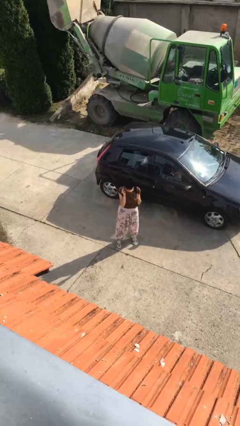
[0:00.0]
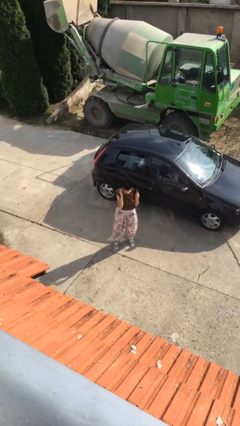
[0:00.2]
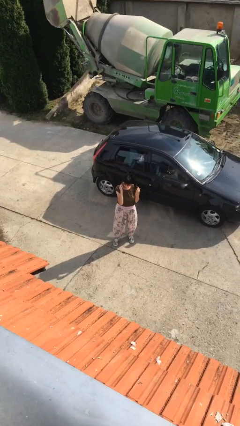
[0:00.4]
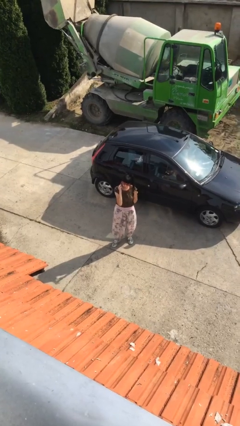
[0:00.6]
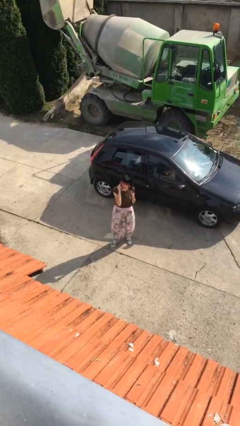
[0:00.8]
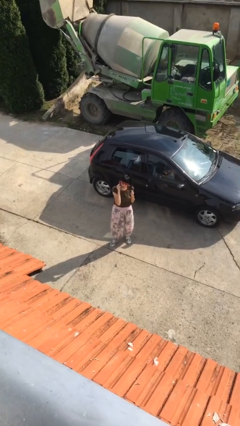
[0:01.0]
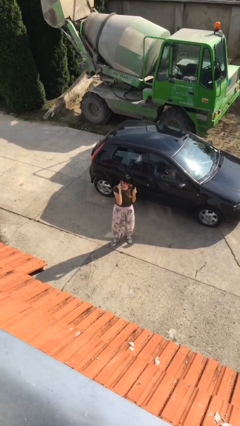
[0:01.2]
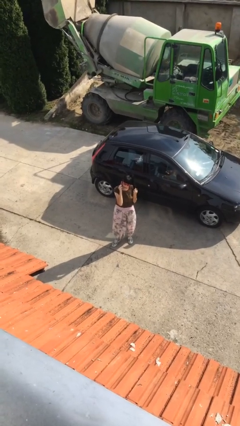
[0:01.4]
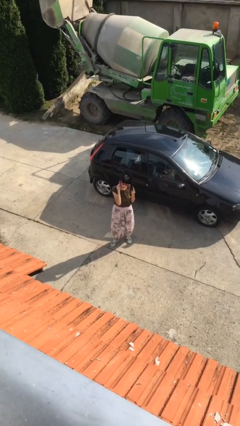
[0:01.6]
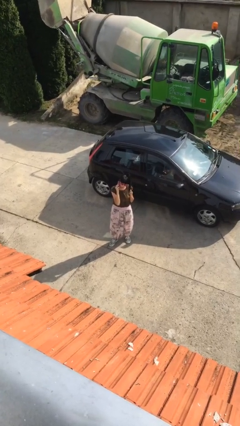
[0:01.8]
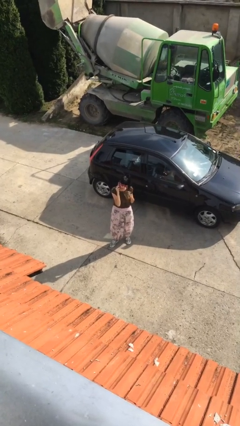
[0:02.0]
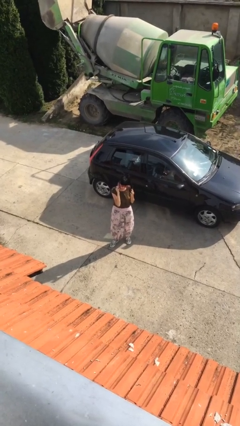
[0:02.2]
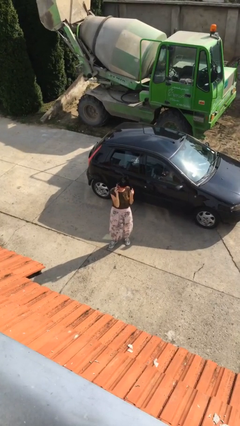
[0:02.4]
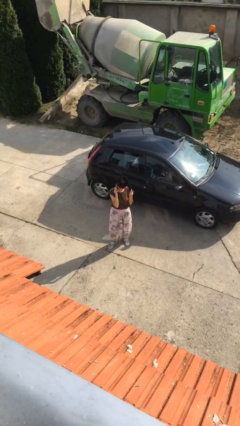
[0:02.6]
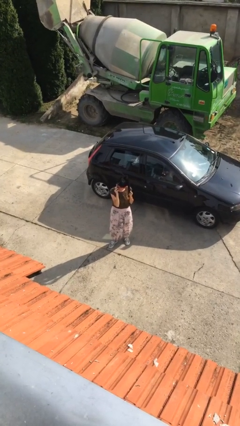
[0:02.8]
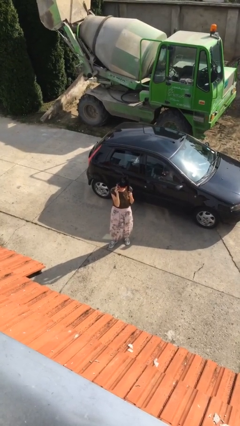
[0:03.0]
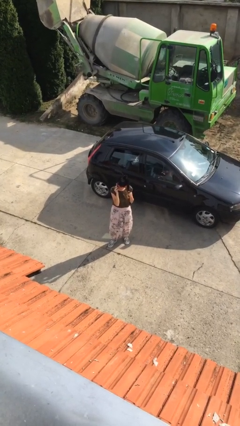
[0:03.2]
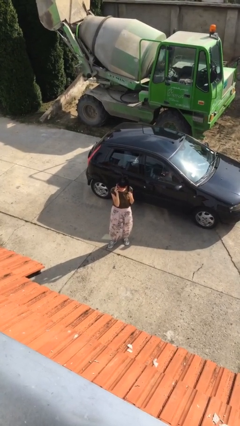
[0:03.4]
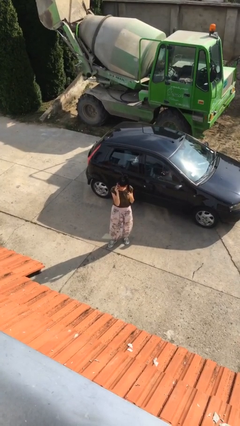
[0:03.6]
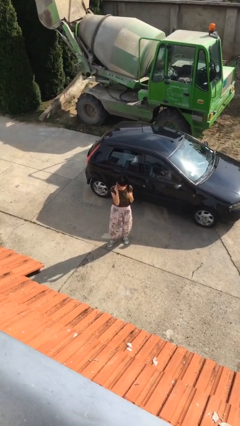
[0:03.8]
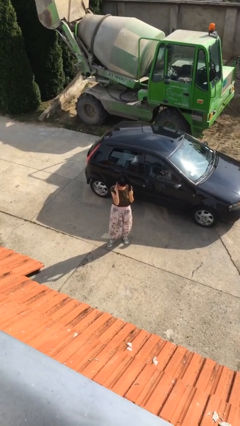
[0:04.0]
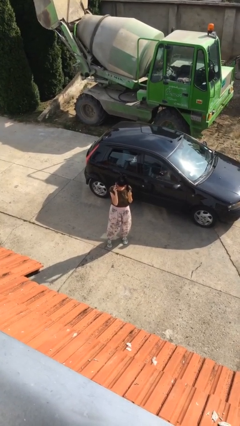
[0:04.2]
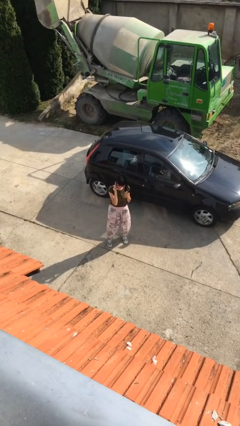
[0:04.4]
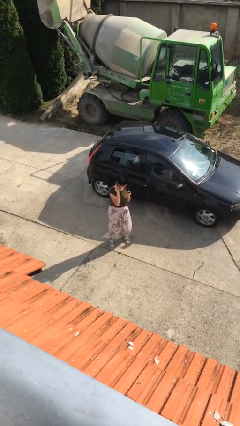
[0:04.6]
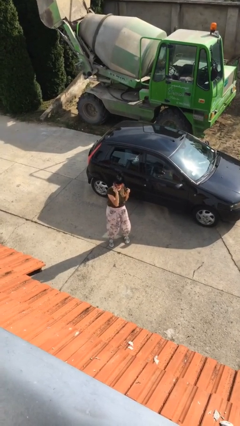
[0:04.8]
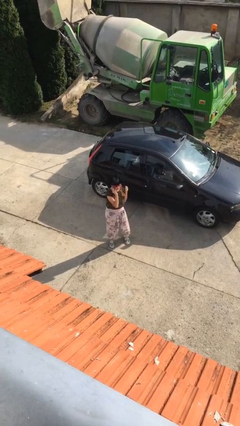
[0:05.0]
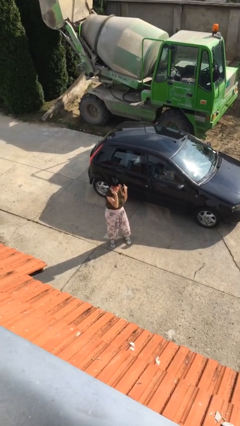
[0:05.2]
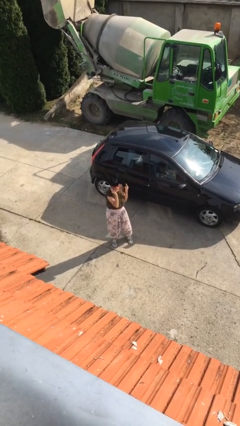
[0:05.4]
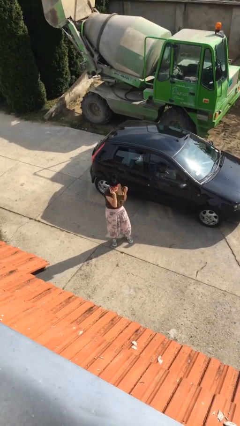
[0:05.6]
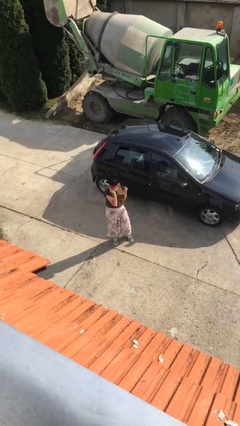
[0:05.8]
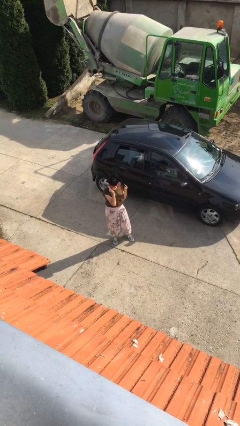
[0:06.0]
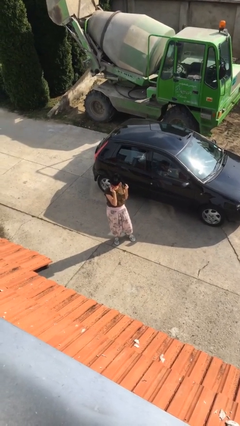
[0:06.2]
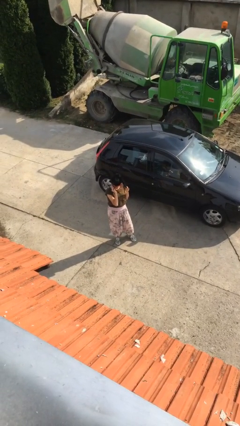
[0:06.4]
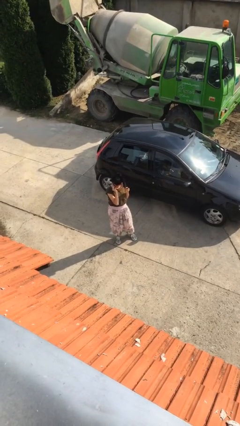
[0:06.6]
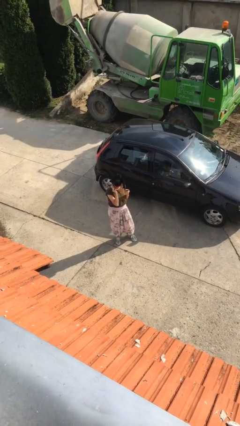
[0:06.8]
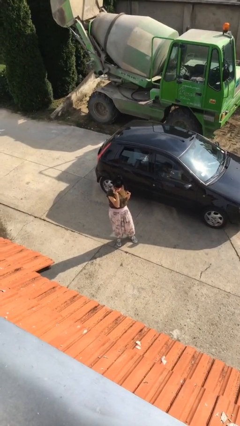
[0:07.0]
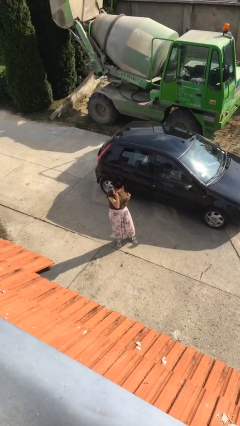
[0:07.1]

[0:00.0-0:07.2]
person talks on phone

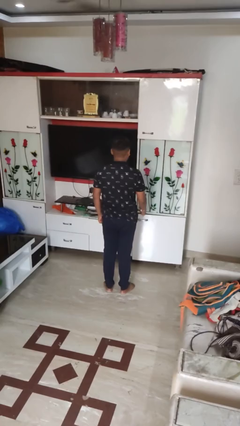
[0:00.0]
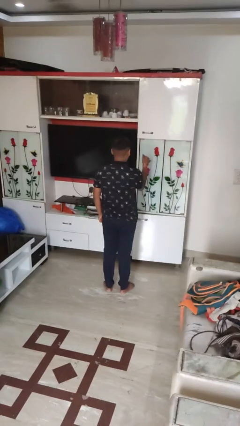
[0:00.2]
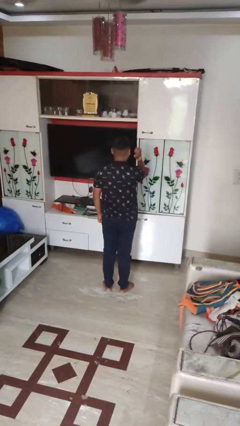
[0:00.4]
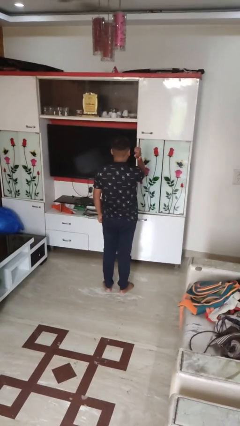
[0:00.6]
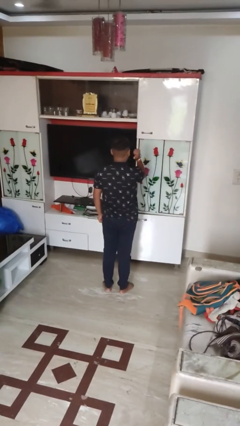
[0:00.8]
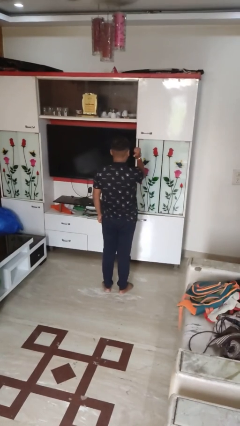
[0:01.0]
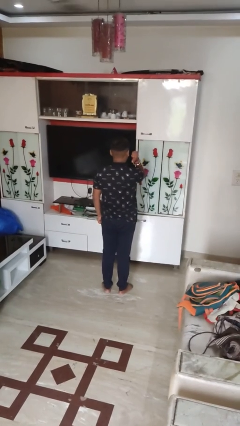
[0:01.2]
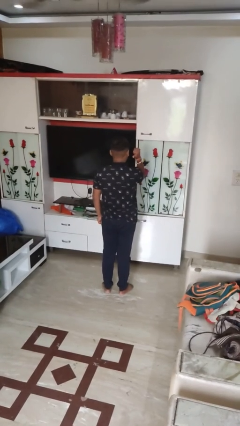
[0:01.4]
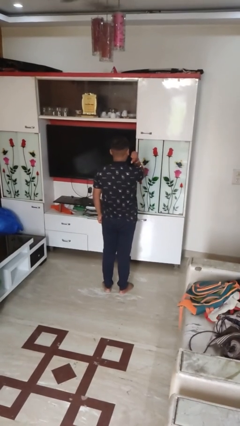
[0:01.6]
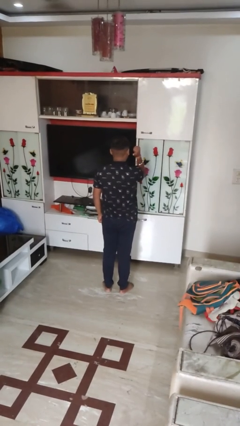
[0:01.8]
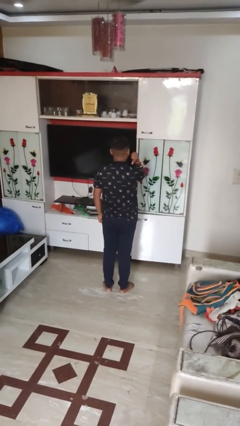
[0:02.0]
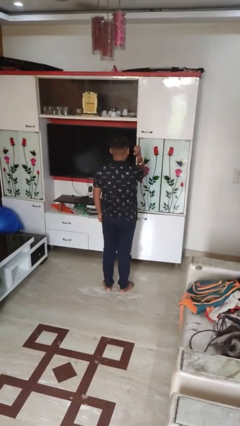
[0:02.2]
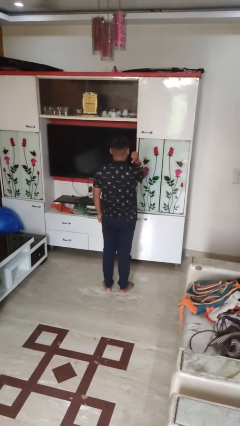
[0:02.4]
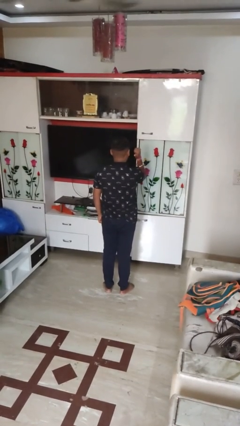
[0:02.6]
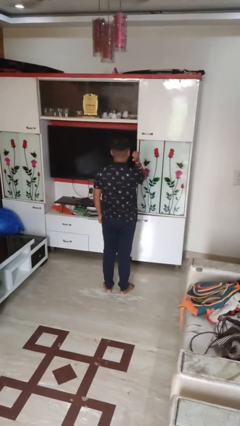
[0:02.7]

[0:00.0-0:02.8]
person gestures behind me

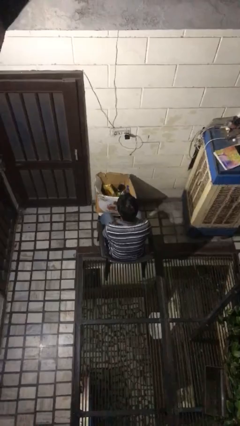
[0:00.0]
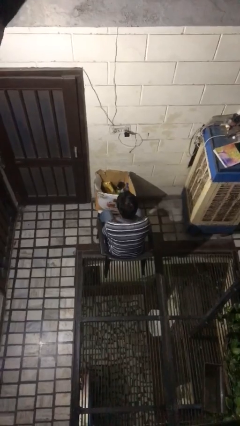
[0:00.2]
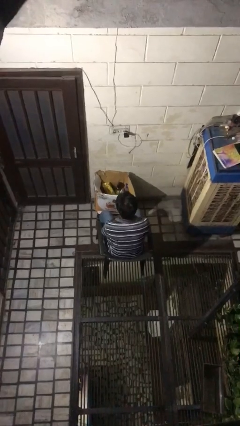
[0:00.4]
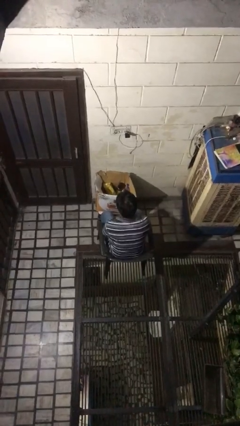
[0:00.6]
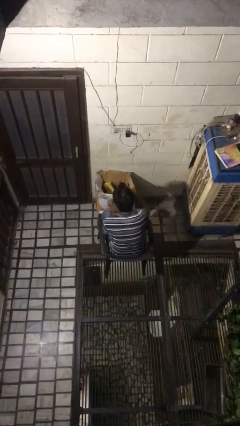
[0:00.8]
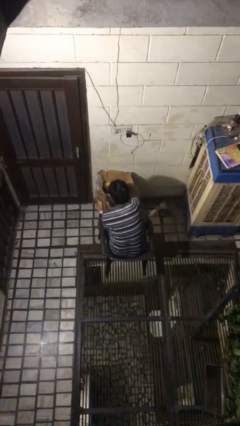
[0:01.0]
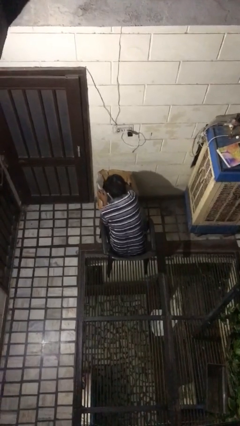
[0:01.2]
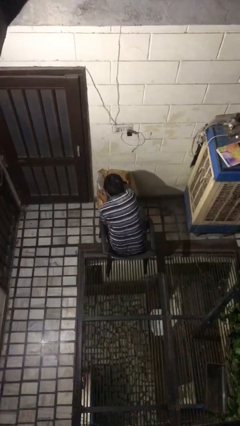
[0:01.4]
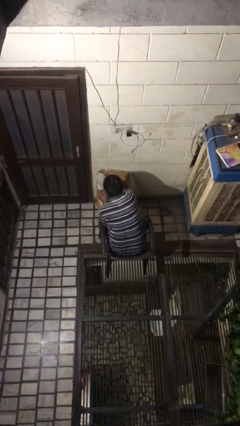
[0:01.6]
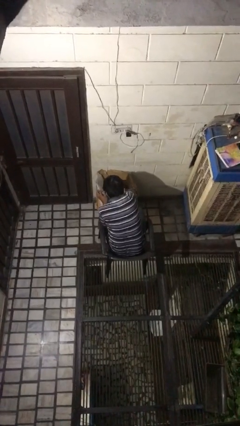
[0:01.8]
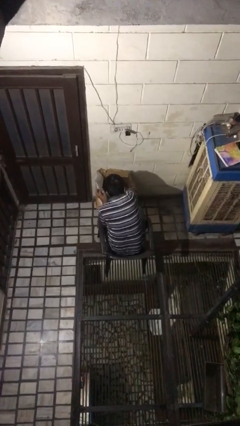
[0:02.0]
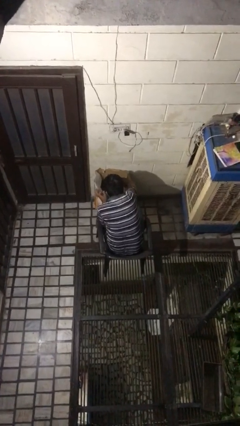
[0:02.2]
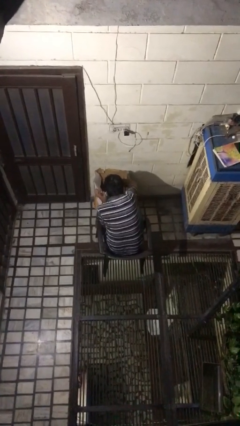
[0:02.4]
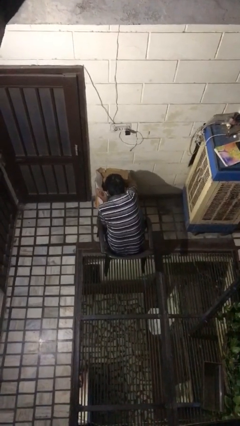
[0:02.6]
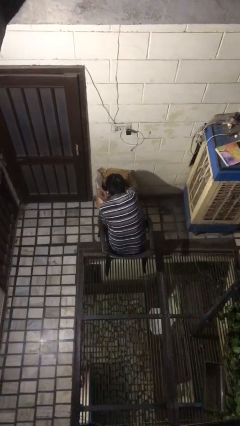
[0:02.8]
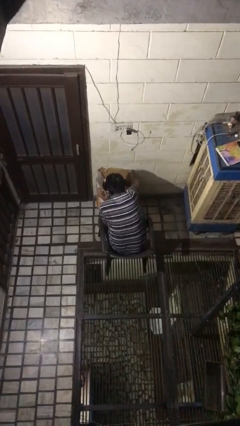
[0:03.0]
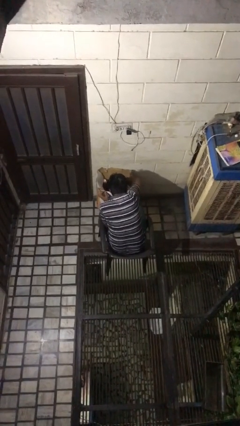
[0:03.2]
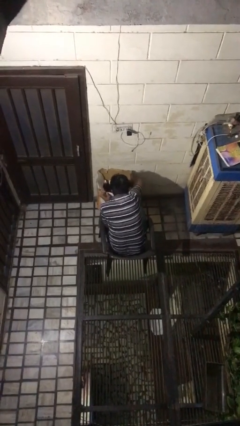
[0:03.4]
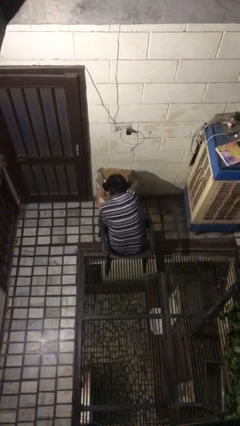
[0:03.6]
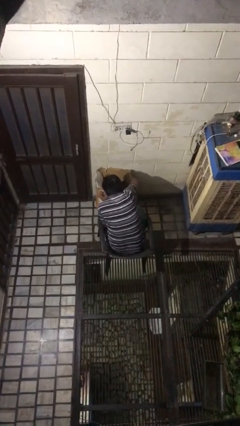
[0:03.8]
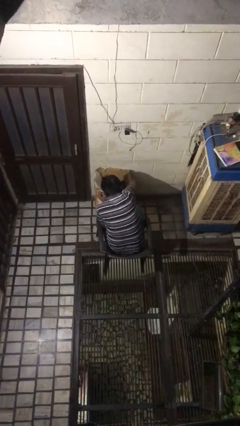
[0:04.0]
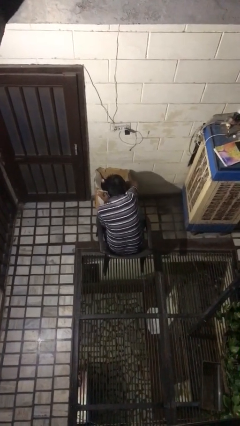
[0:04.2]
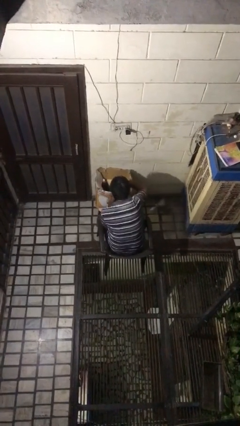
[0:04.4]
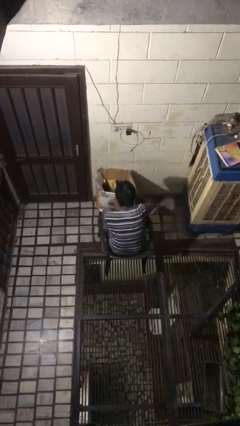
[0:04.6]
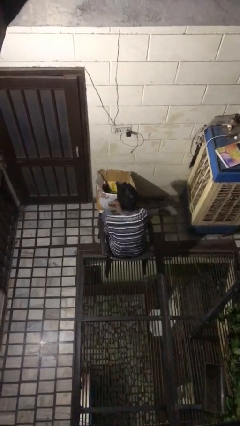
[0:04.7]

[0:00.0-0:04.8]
person searches in box

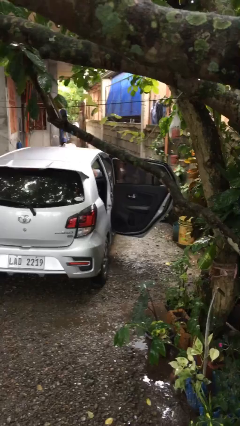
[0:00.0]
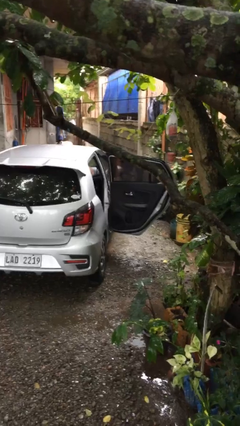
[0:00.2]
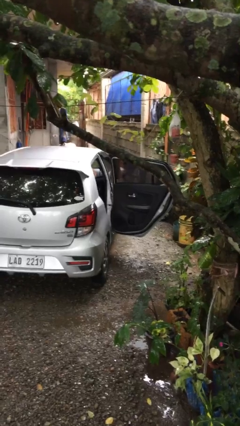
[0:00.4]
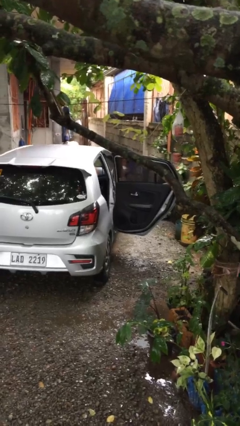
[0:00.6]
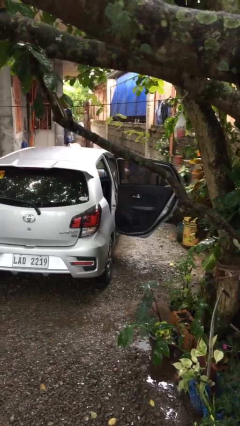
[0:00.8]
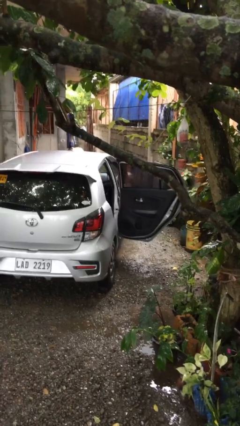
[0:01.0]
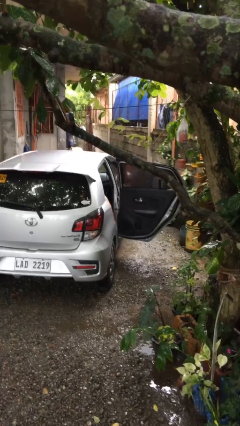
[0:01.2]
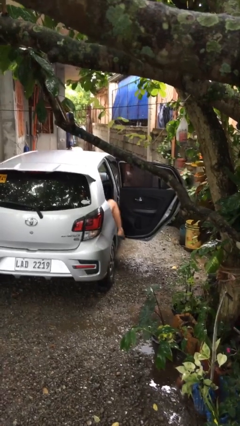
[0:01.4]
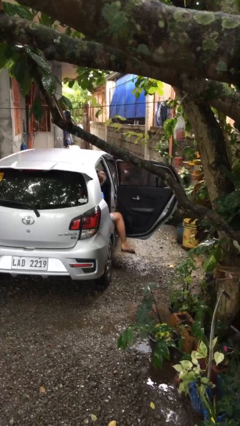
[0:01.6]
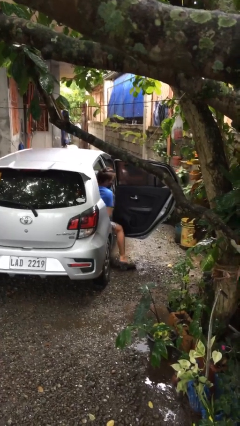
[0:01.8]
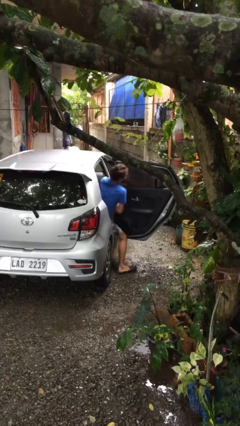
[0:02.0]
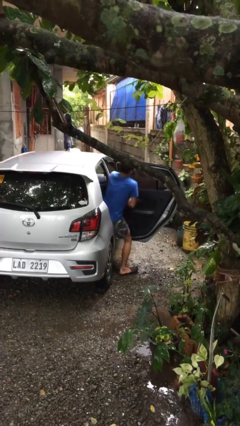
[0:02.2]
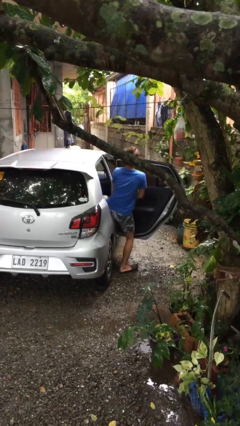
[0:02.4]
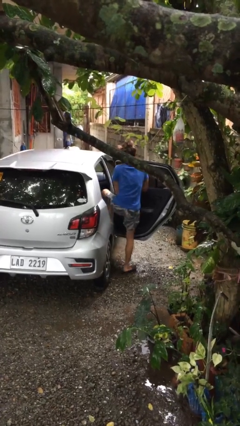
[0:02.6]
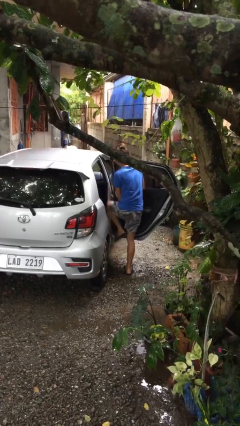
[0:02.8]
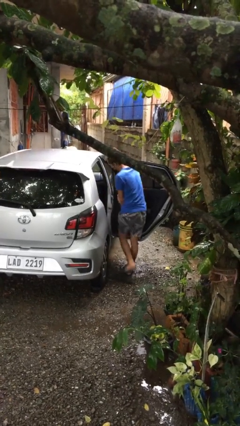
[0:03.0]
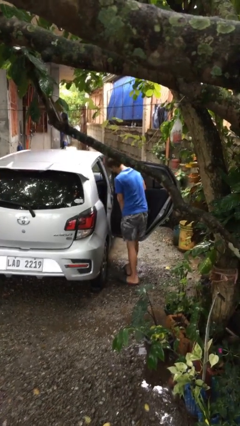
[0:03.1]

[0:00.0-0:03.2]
person exits car
